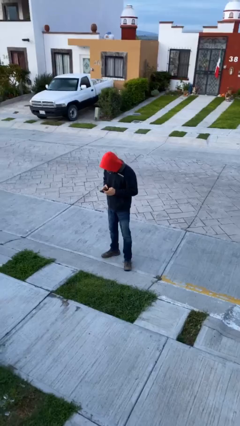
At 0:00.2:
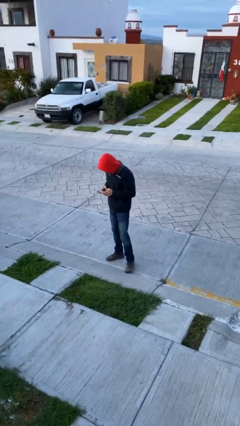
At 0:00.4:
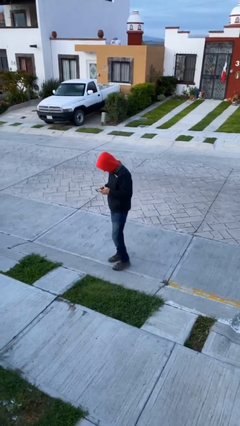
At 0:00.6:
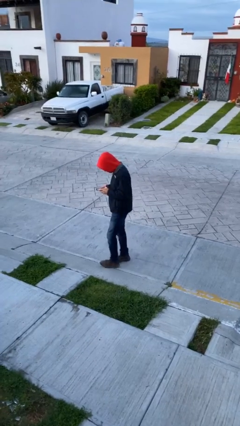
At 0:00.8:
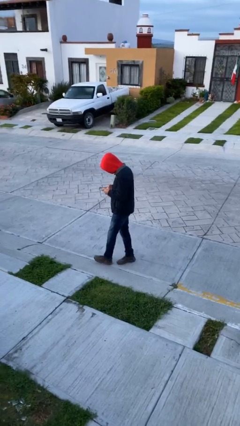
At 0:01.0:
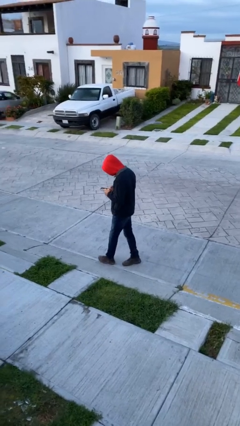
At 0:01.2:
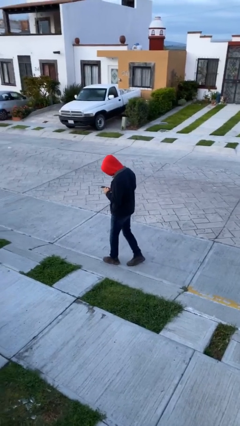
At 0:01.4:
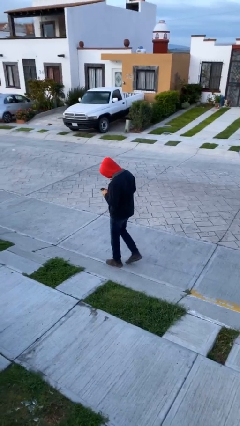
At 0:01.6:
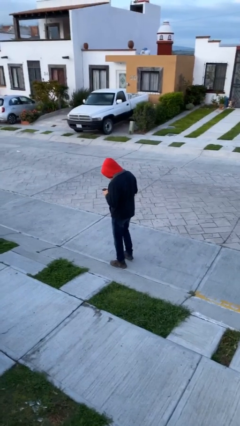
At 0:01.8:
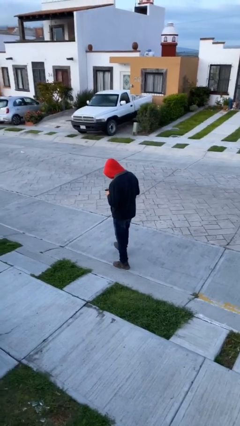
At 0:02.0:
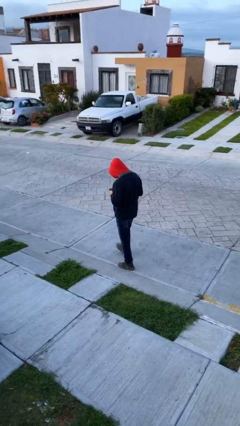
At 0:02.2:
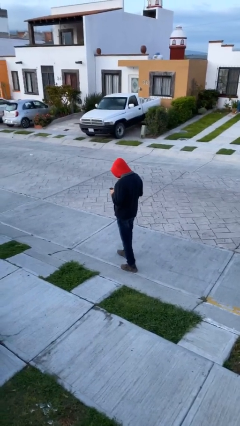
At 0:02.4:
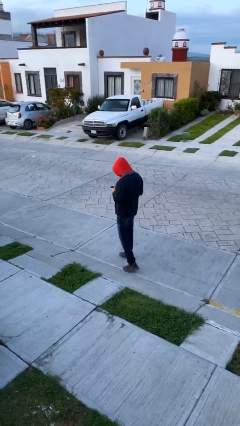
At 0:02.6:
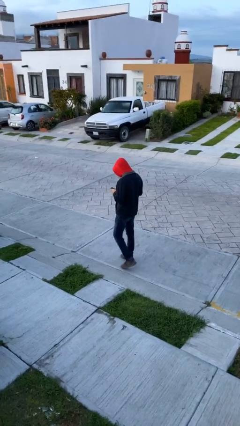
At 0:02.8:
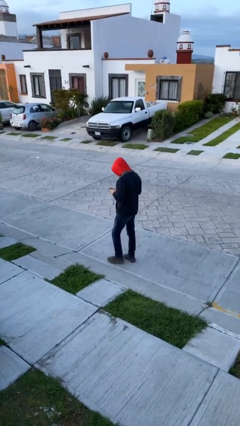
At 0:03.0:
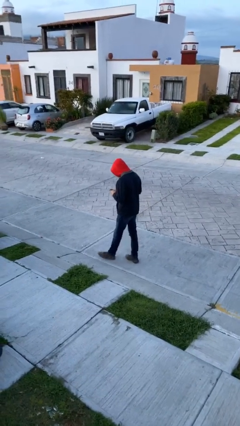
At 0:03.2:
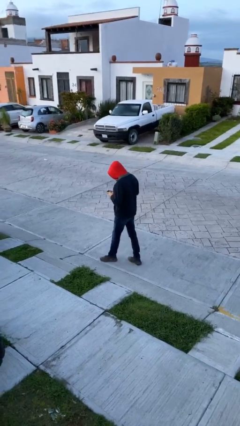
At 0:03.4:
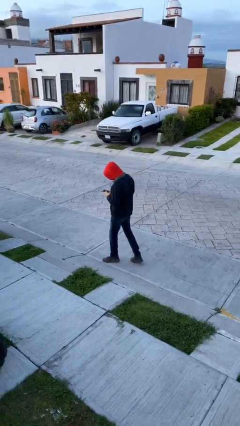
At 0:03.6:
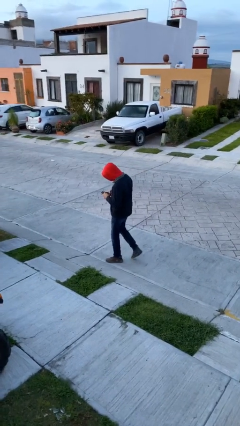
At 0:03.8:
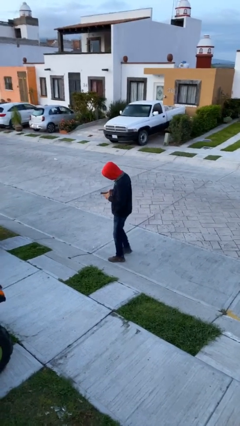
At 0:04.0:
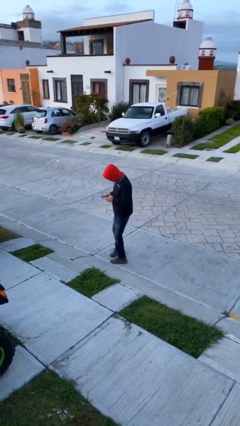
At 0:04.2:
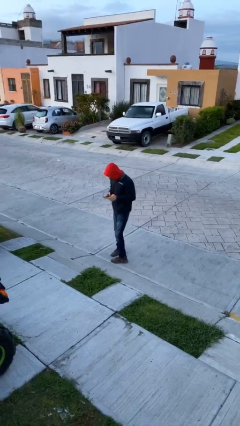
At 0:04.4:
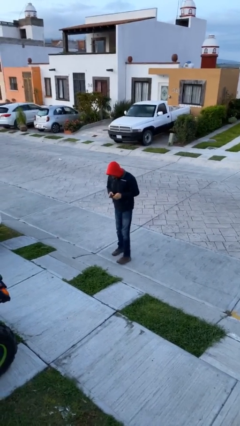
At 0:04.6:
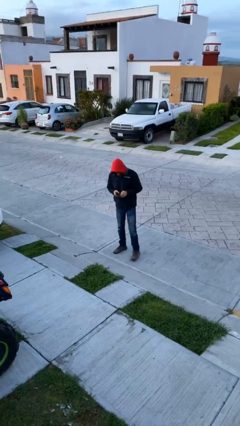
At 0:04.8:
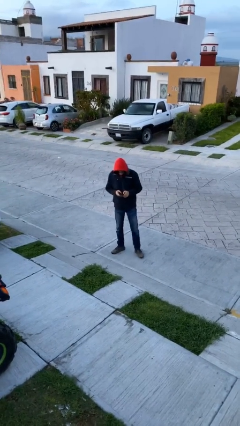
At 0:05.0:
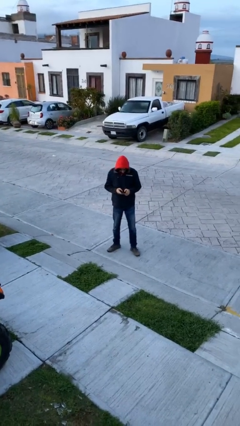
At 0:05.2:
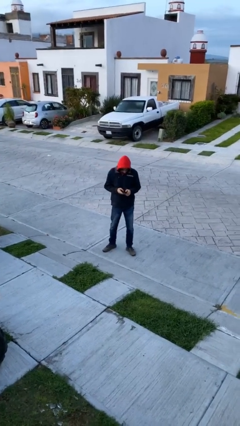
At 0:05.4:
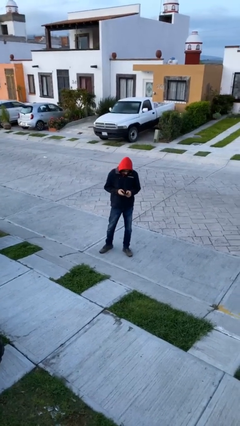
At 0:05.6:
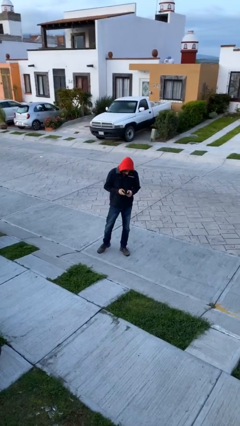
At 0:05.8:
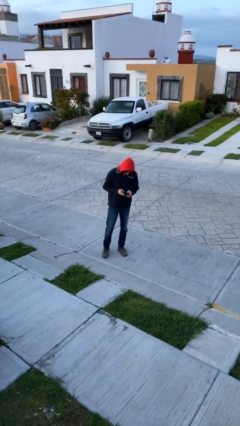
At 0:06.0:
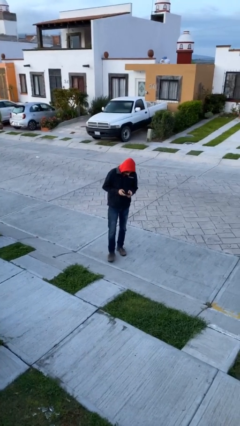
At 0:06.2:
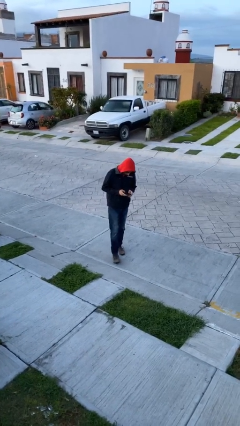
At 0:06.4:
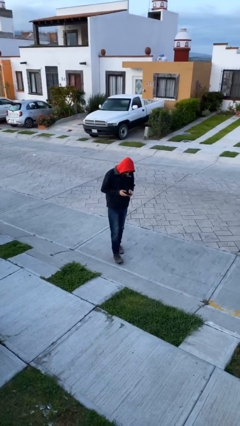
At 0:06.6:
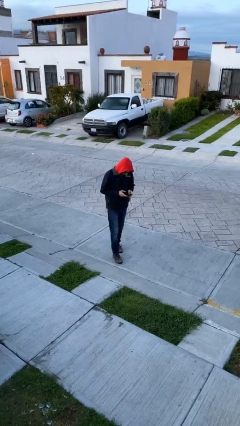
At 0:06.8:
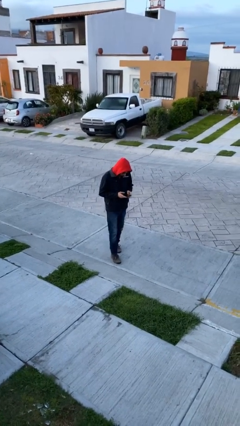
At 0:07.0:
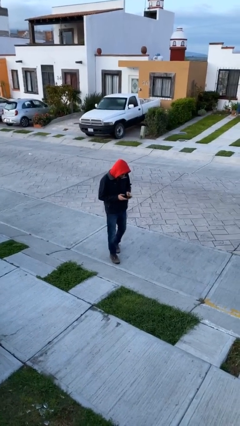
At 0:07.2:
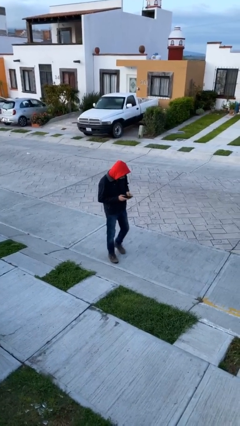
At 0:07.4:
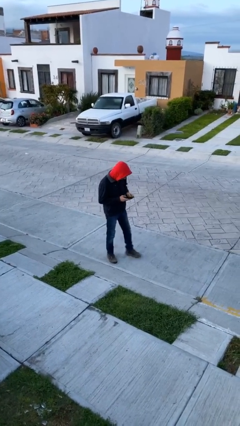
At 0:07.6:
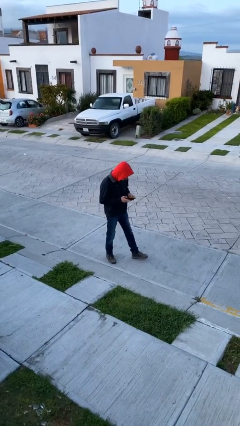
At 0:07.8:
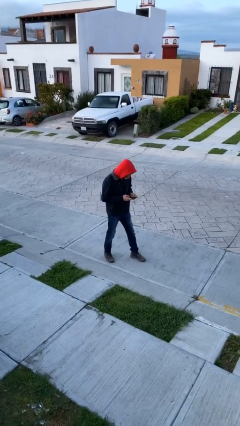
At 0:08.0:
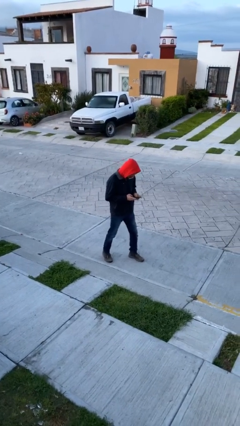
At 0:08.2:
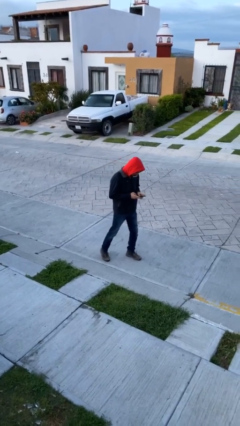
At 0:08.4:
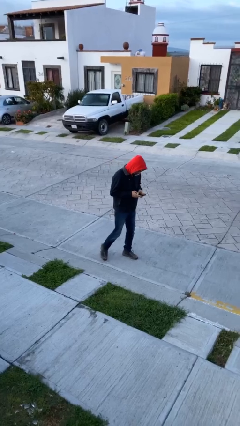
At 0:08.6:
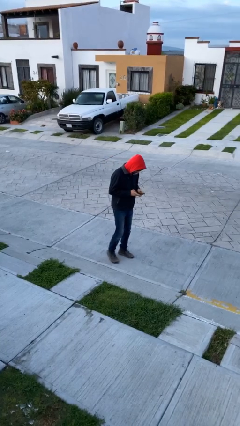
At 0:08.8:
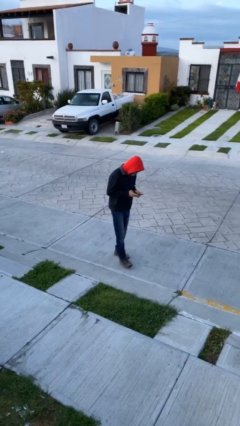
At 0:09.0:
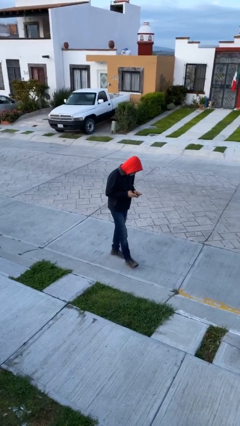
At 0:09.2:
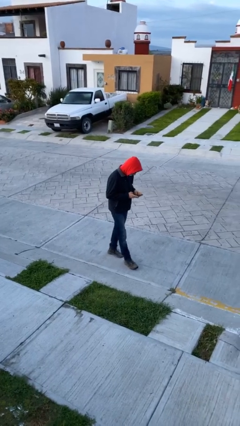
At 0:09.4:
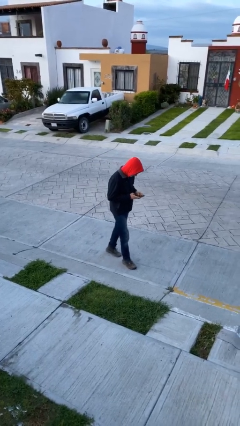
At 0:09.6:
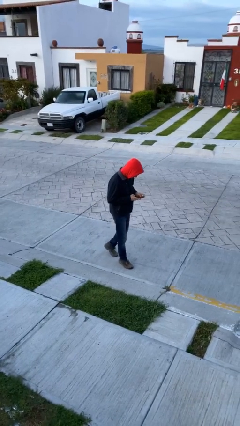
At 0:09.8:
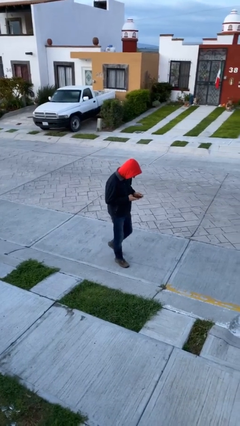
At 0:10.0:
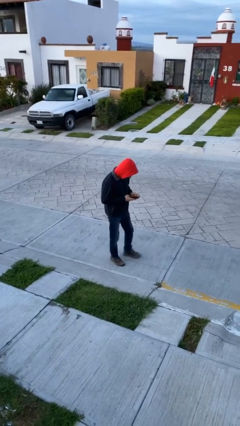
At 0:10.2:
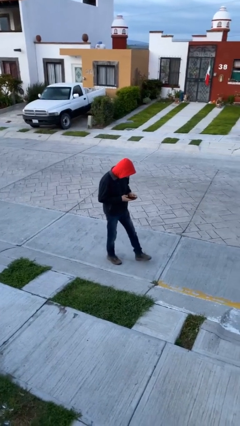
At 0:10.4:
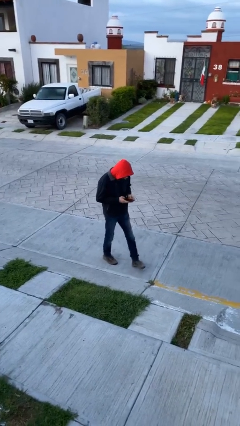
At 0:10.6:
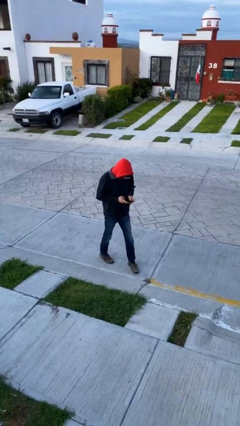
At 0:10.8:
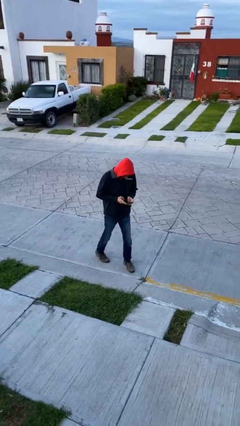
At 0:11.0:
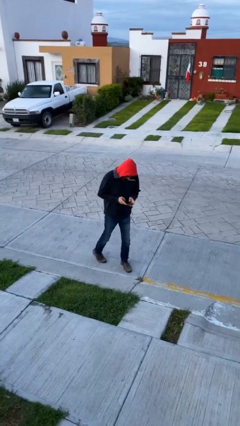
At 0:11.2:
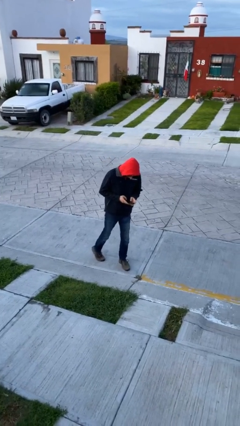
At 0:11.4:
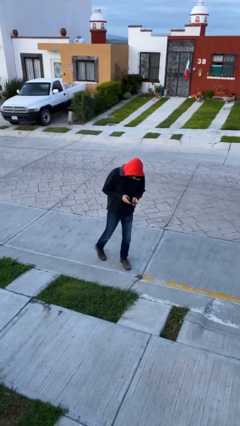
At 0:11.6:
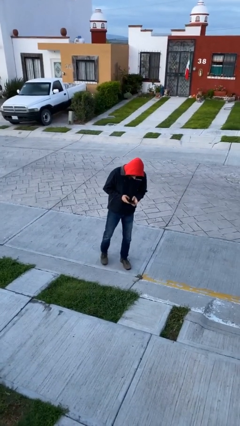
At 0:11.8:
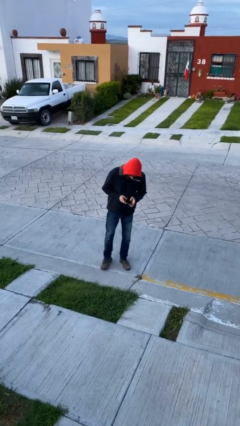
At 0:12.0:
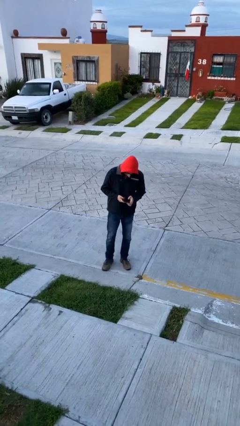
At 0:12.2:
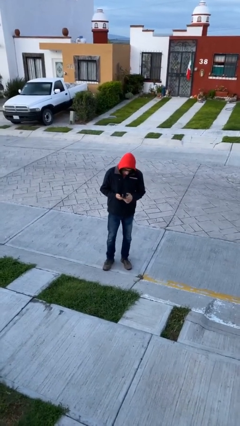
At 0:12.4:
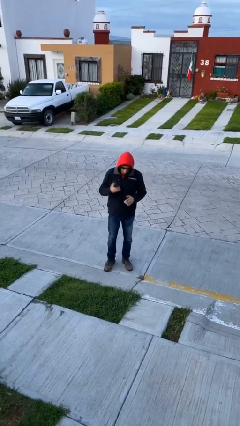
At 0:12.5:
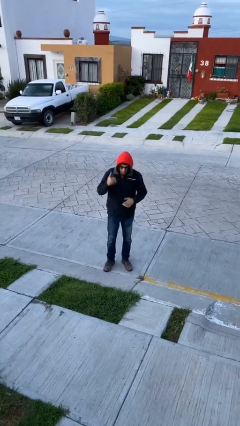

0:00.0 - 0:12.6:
person texts on phone

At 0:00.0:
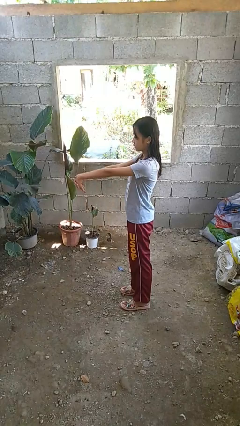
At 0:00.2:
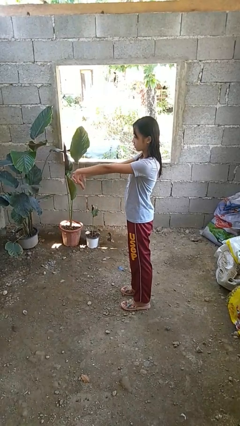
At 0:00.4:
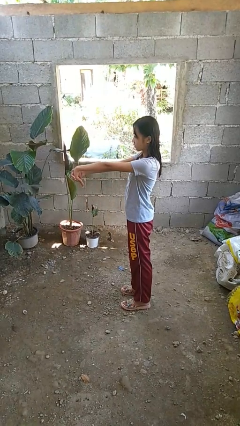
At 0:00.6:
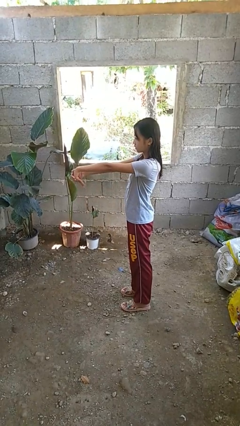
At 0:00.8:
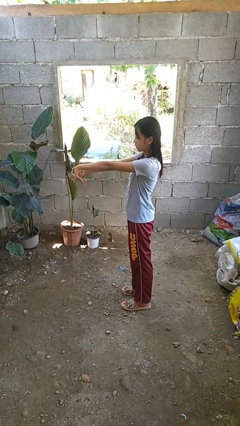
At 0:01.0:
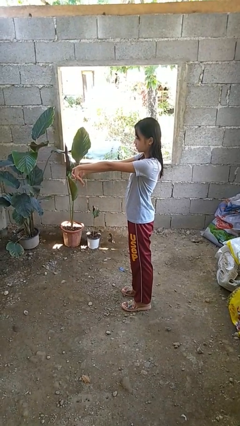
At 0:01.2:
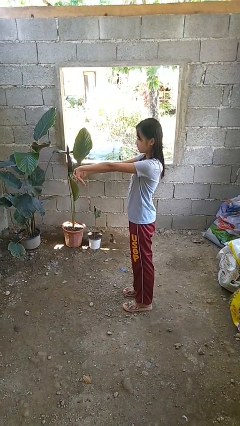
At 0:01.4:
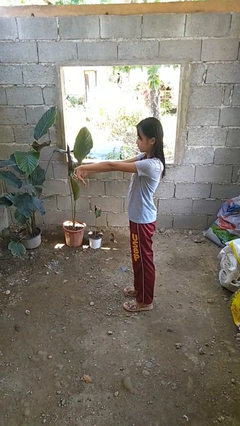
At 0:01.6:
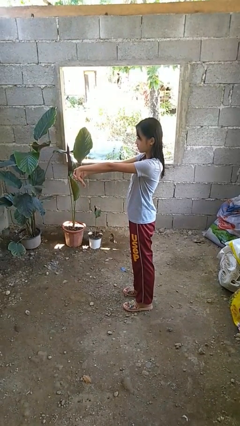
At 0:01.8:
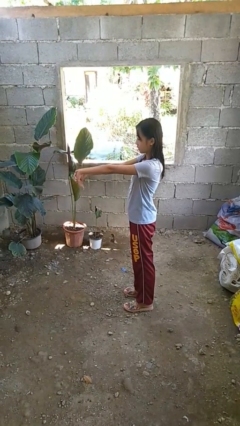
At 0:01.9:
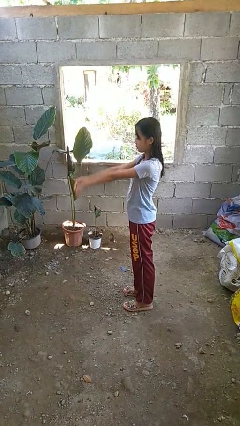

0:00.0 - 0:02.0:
person cracks knuckles

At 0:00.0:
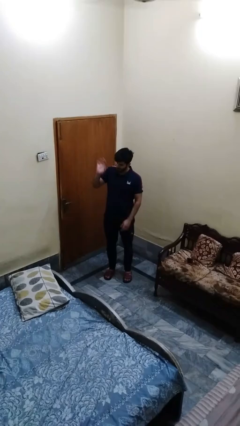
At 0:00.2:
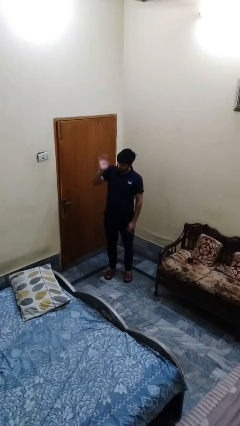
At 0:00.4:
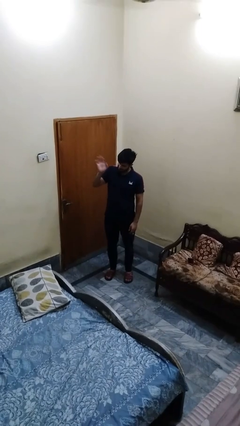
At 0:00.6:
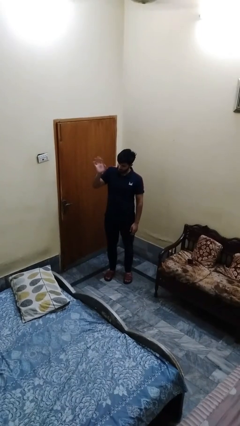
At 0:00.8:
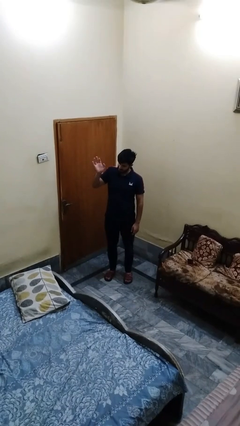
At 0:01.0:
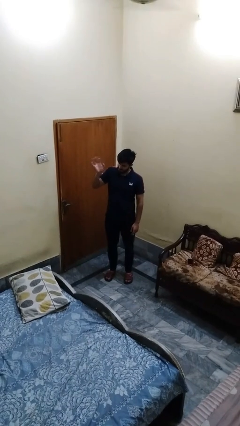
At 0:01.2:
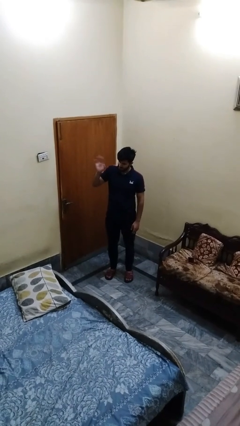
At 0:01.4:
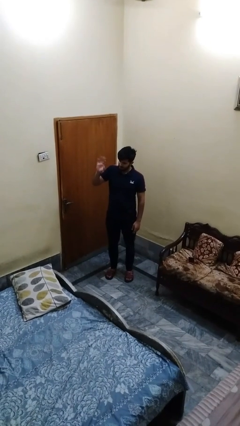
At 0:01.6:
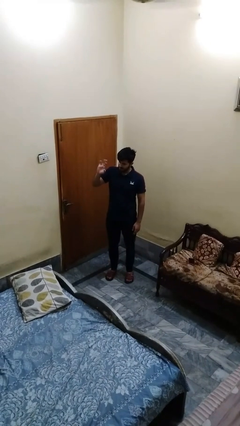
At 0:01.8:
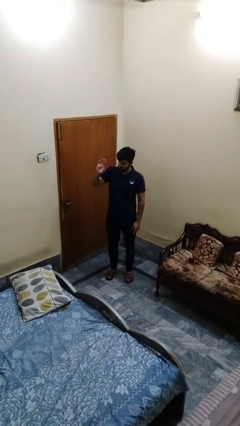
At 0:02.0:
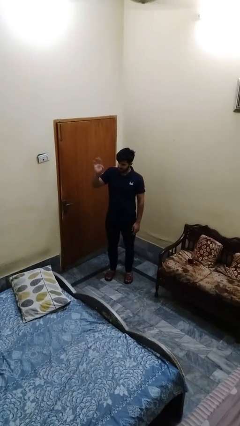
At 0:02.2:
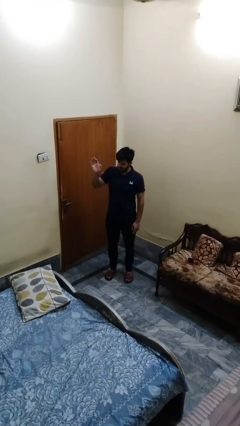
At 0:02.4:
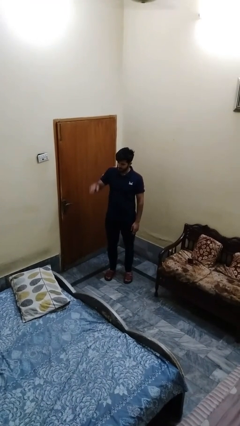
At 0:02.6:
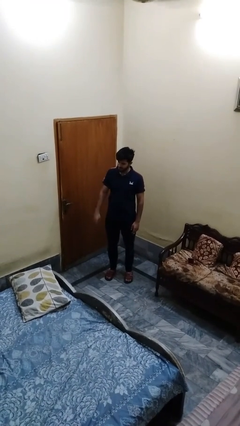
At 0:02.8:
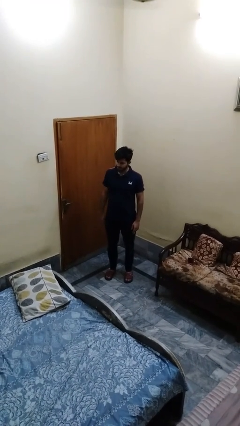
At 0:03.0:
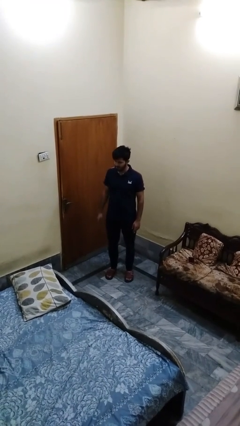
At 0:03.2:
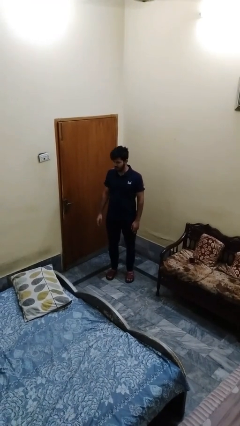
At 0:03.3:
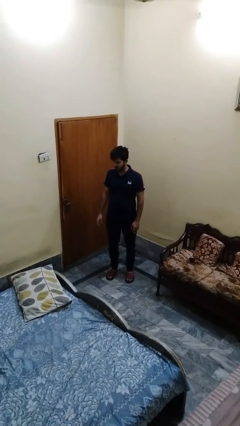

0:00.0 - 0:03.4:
person waves at person
